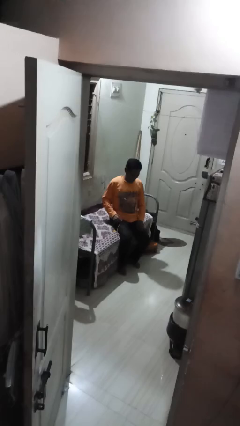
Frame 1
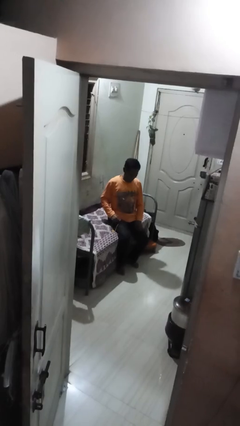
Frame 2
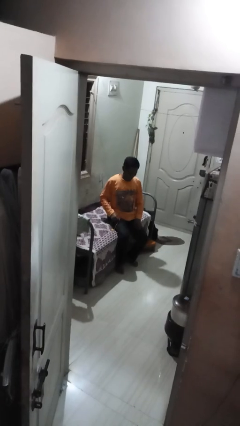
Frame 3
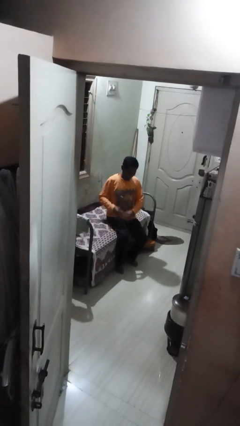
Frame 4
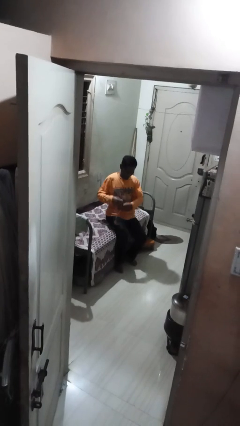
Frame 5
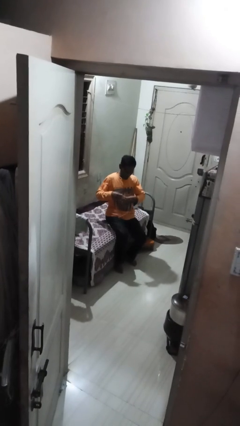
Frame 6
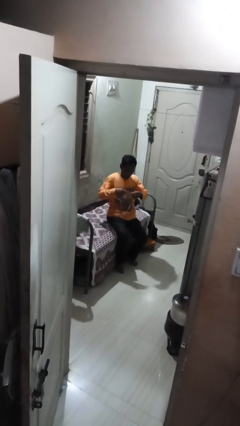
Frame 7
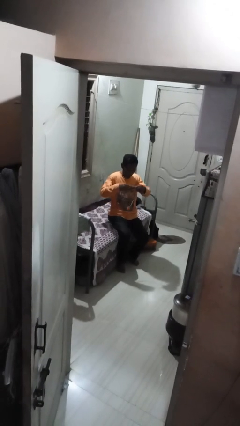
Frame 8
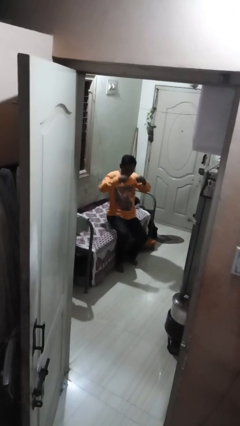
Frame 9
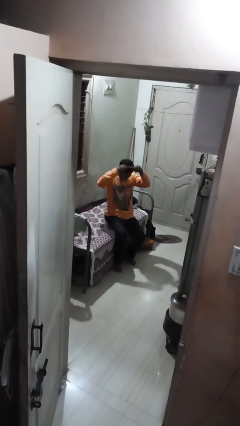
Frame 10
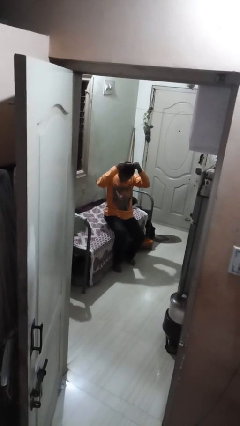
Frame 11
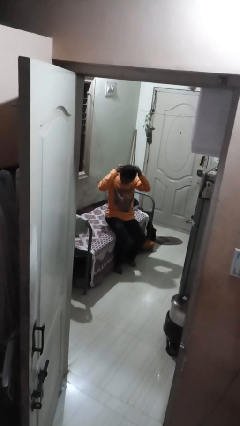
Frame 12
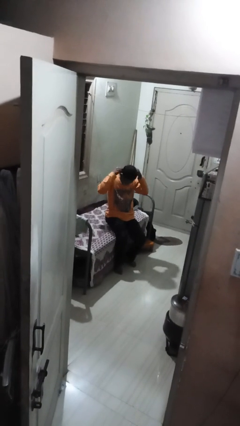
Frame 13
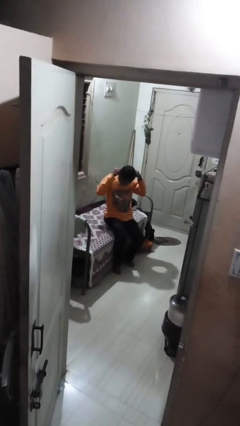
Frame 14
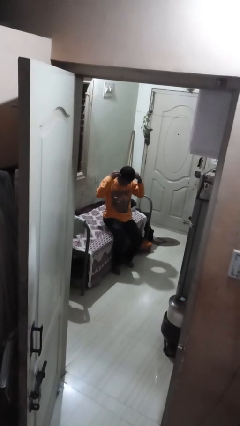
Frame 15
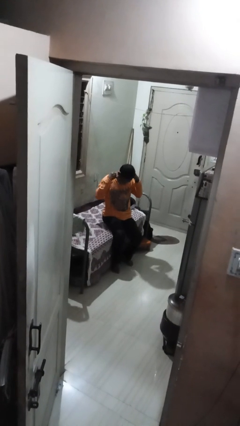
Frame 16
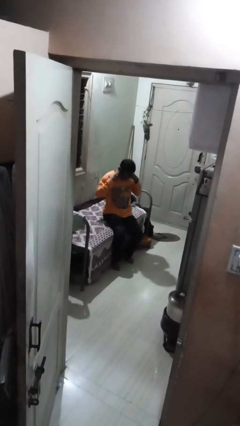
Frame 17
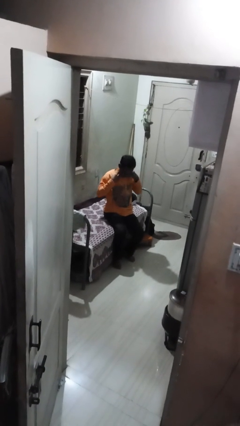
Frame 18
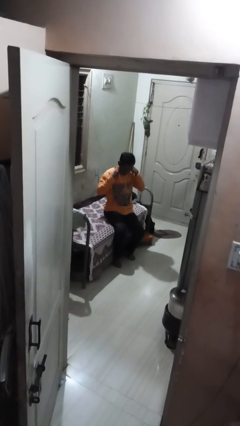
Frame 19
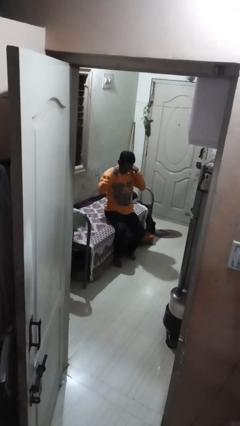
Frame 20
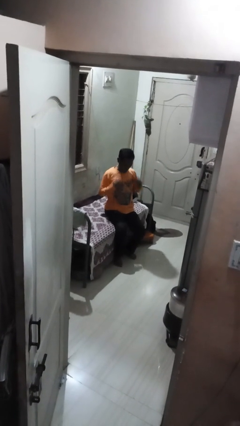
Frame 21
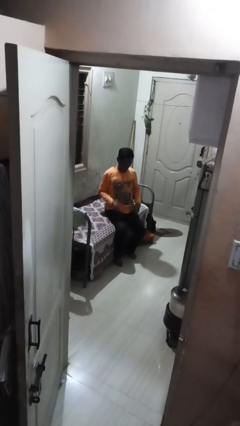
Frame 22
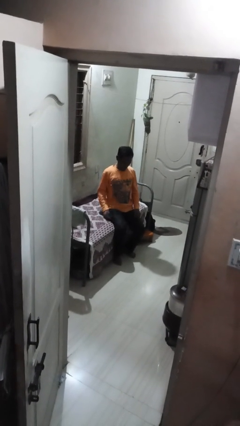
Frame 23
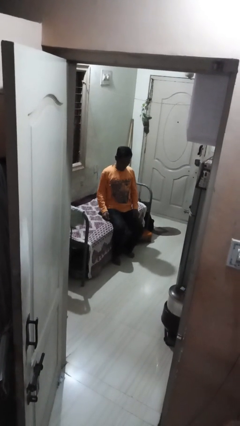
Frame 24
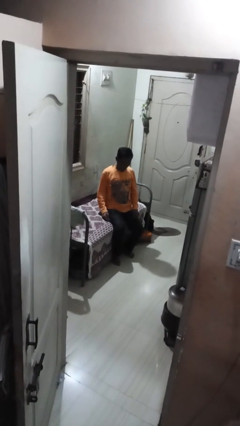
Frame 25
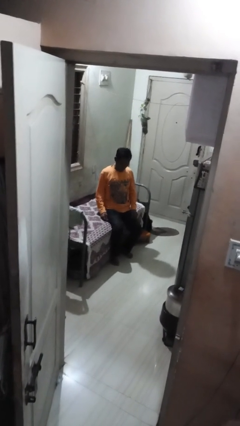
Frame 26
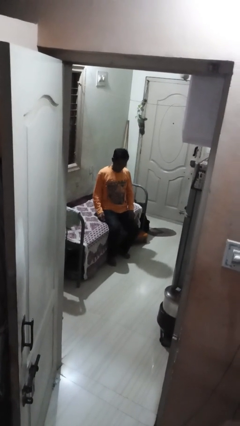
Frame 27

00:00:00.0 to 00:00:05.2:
person puts on necklace

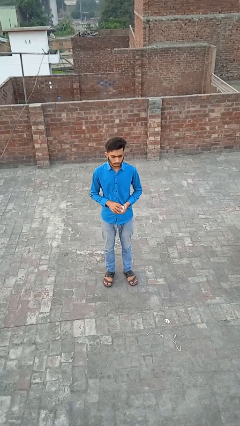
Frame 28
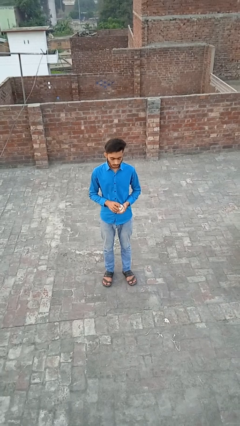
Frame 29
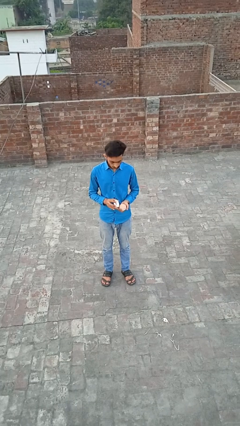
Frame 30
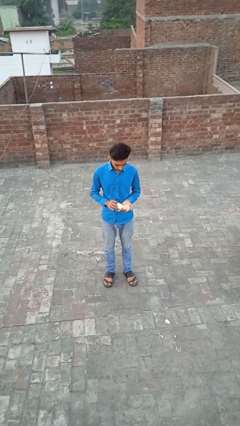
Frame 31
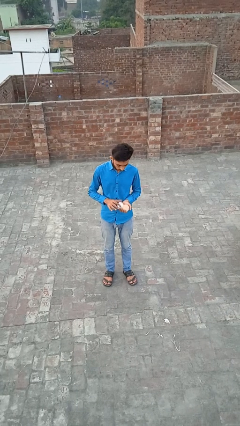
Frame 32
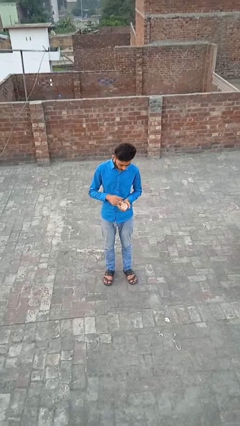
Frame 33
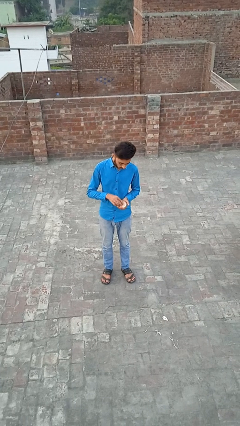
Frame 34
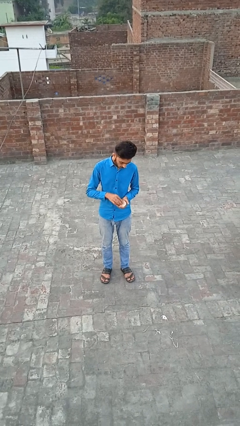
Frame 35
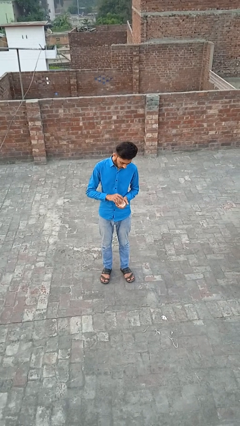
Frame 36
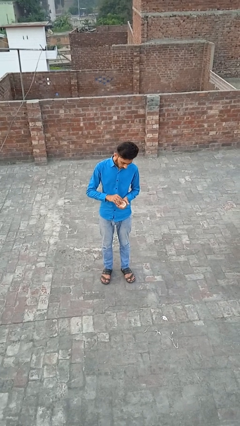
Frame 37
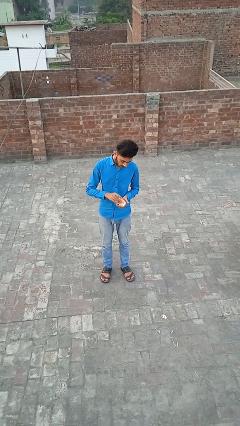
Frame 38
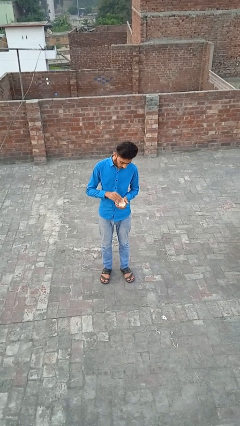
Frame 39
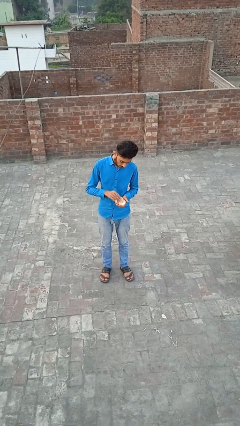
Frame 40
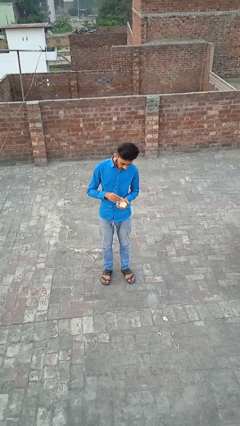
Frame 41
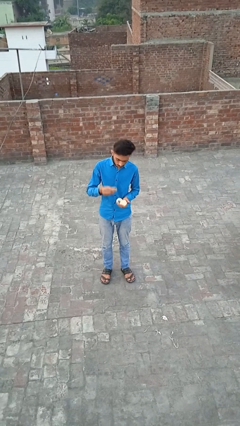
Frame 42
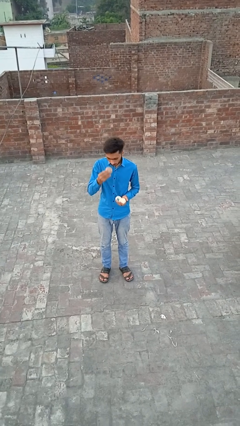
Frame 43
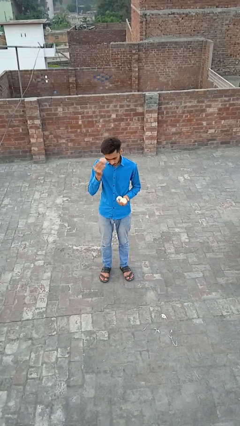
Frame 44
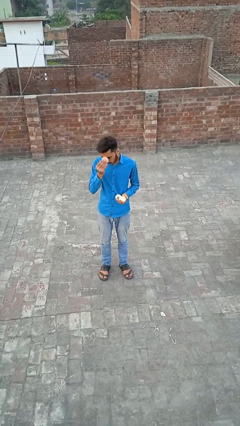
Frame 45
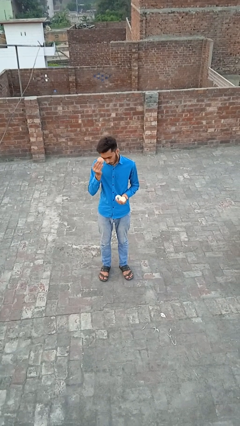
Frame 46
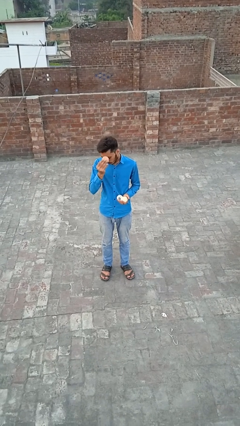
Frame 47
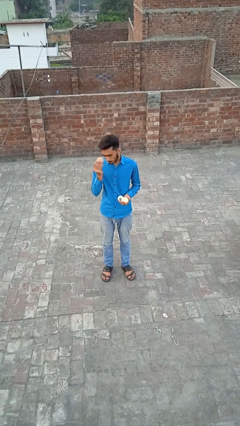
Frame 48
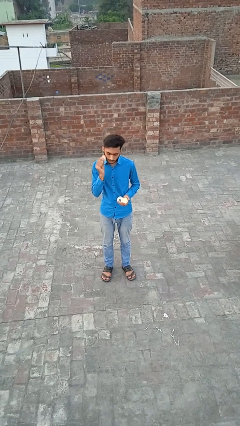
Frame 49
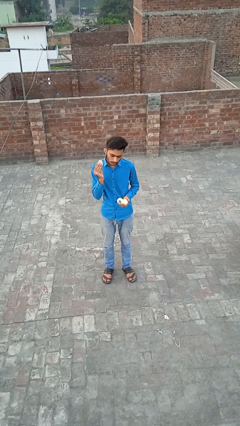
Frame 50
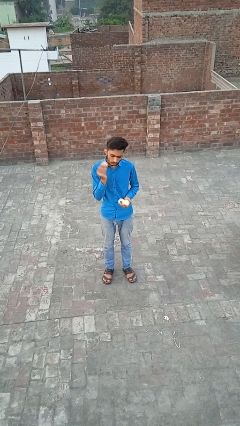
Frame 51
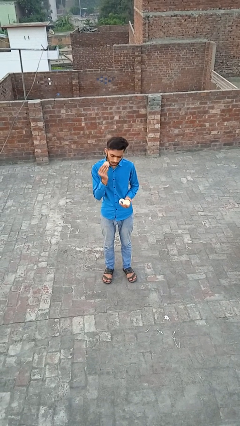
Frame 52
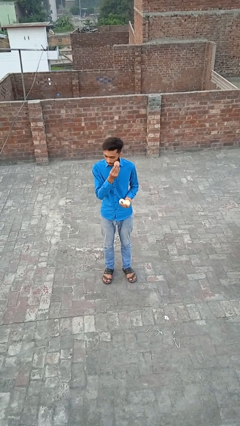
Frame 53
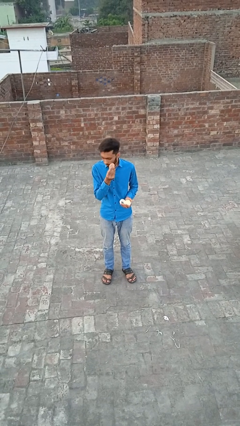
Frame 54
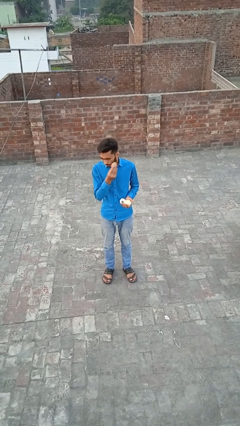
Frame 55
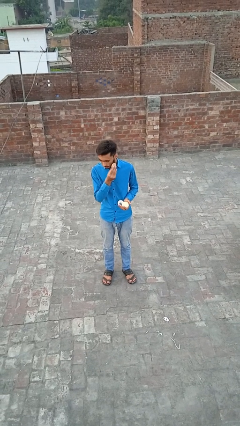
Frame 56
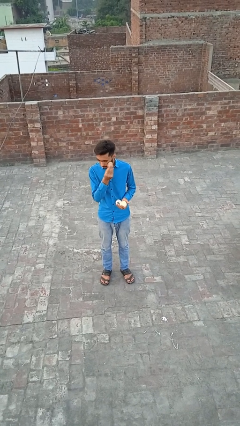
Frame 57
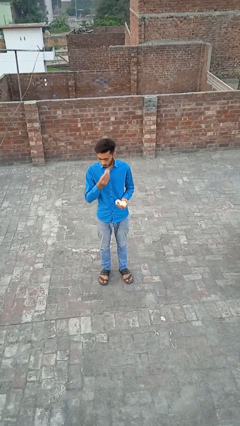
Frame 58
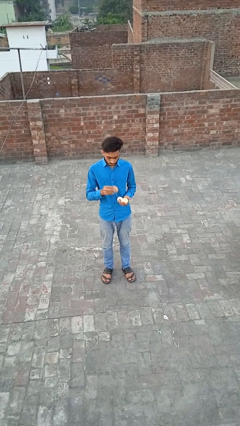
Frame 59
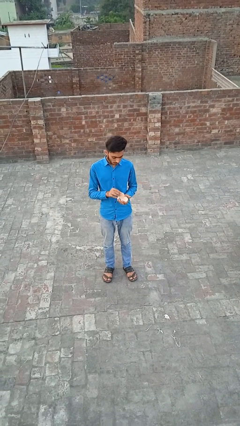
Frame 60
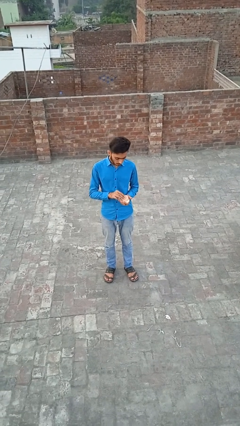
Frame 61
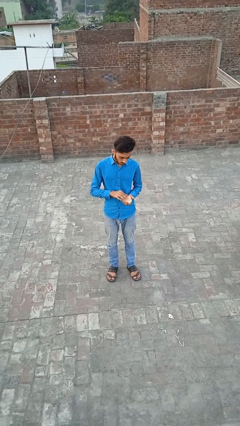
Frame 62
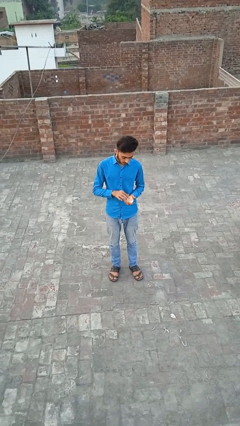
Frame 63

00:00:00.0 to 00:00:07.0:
person applies foundation makeup

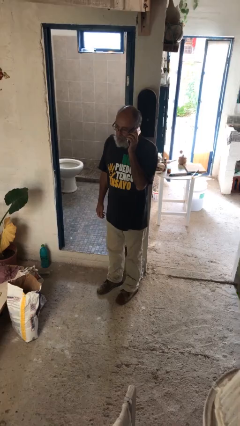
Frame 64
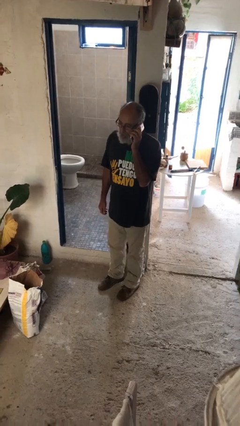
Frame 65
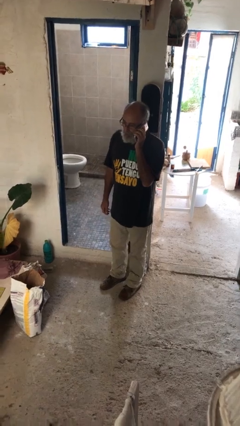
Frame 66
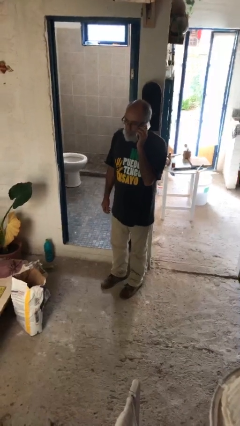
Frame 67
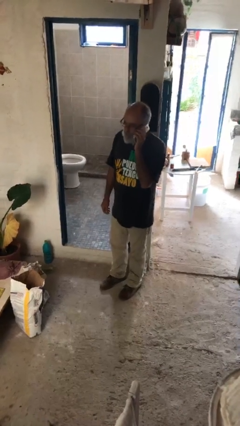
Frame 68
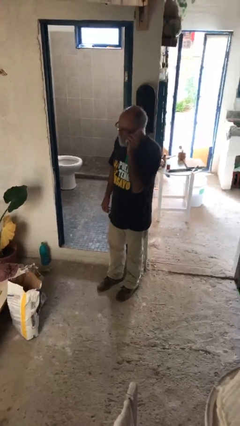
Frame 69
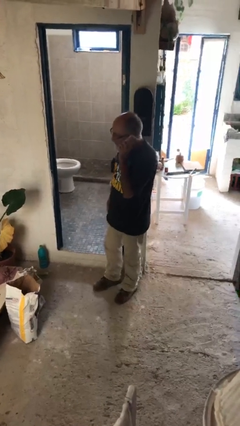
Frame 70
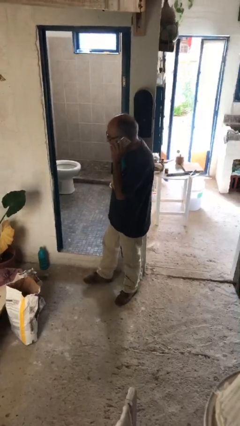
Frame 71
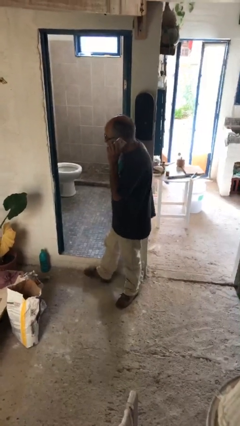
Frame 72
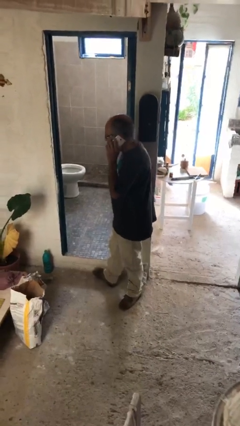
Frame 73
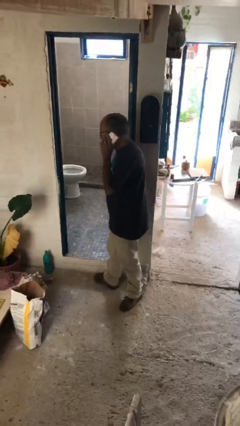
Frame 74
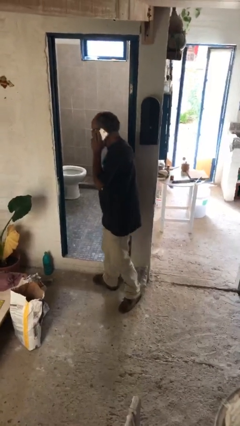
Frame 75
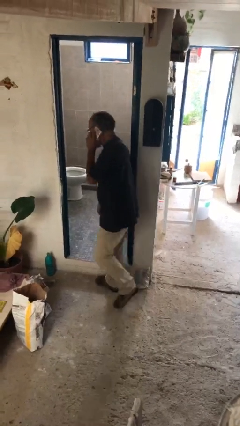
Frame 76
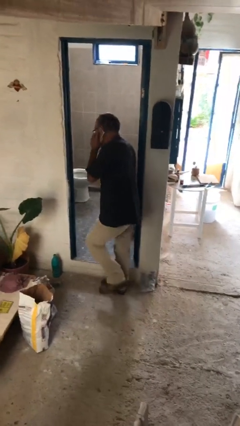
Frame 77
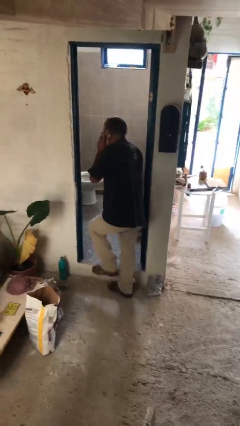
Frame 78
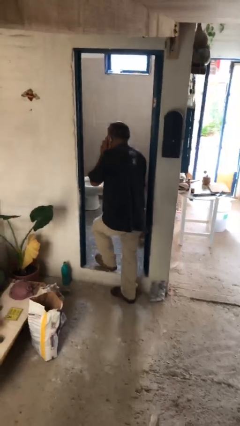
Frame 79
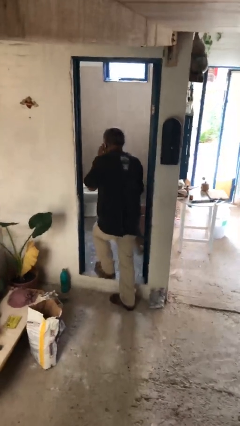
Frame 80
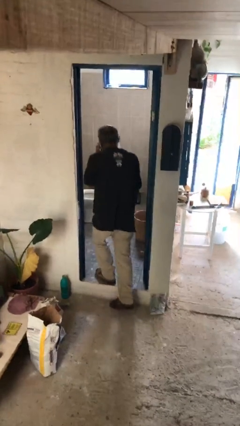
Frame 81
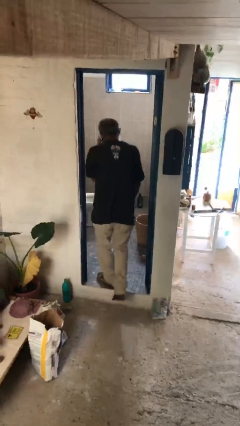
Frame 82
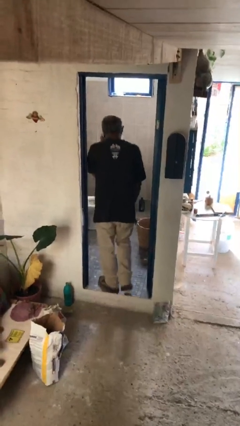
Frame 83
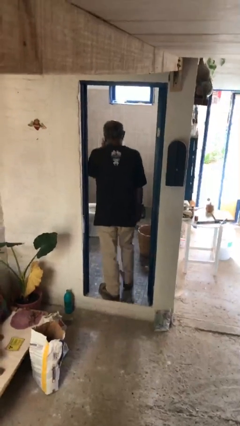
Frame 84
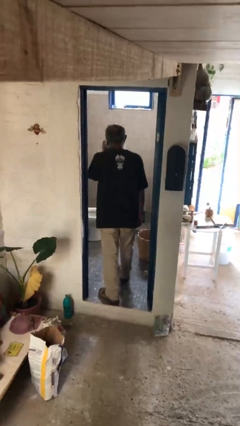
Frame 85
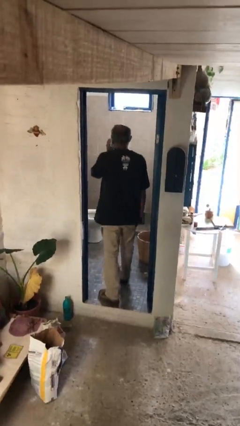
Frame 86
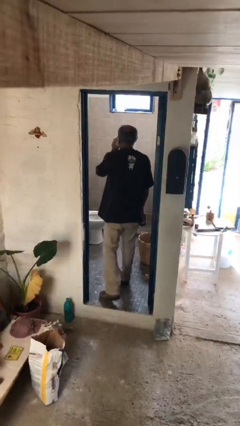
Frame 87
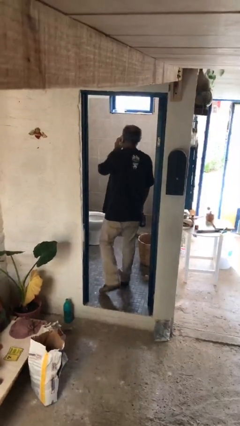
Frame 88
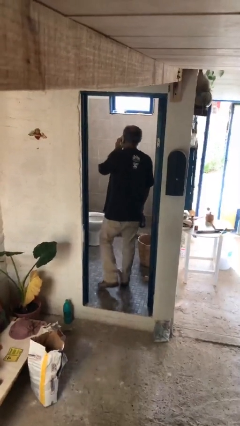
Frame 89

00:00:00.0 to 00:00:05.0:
person exits scene through structure
